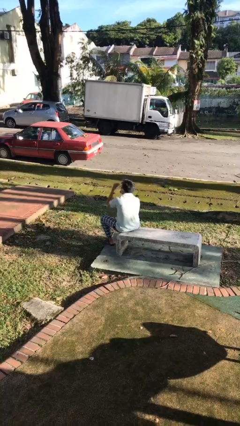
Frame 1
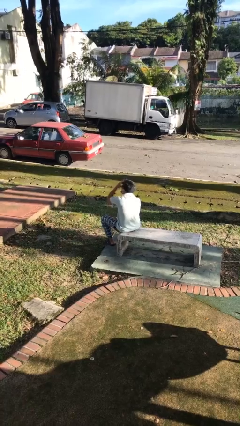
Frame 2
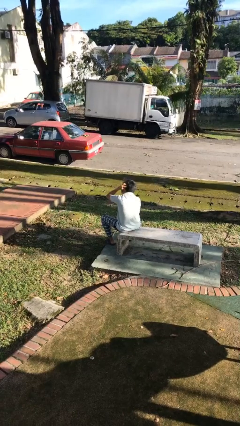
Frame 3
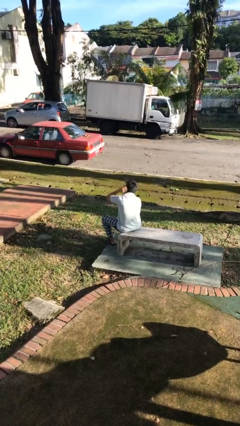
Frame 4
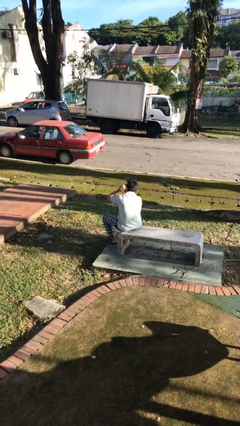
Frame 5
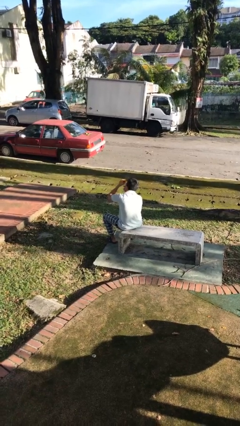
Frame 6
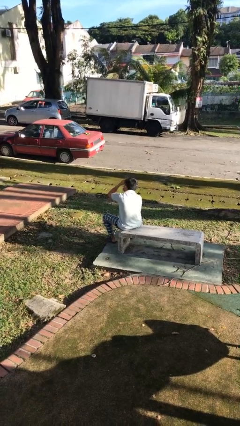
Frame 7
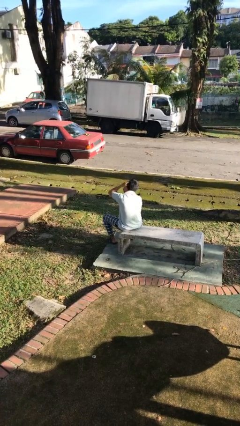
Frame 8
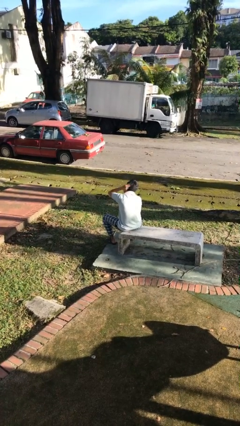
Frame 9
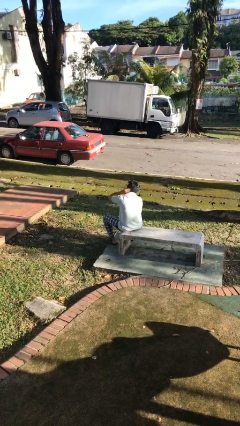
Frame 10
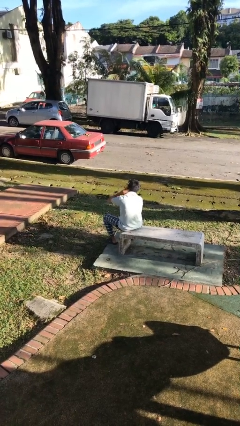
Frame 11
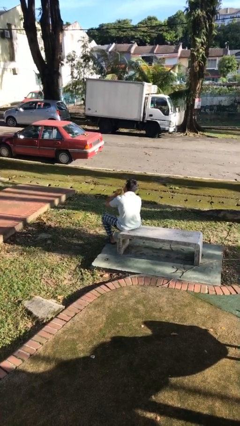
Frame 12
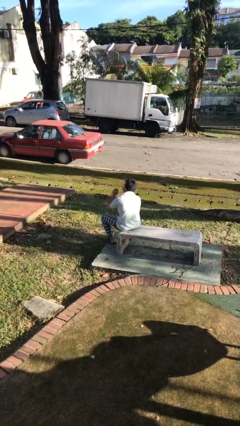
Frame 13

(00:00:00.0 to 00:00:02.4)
person strokes hair

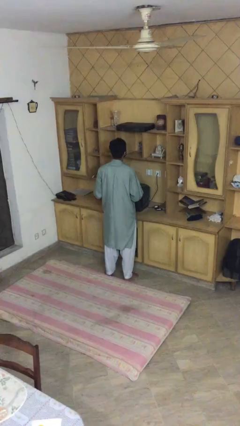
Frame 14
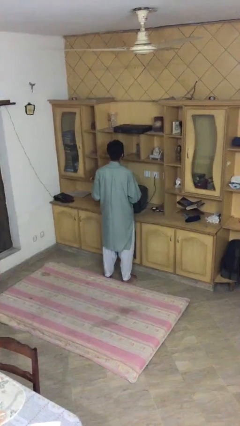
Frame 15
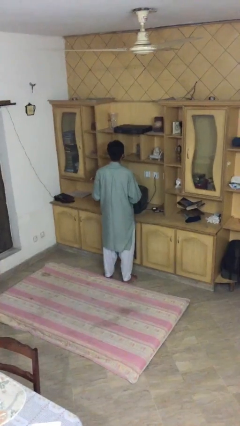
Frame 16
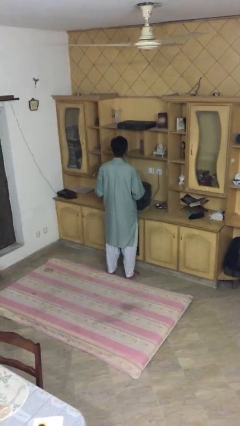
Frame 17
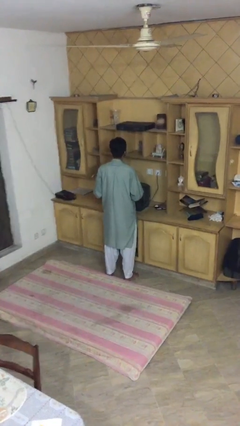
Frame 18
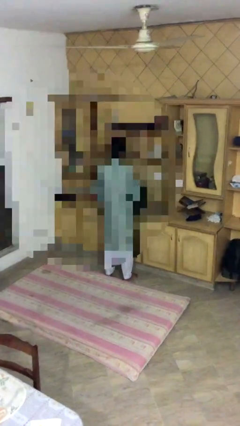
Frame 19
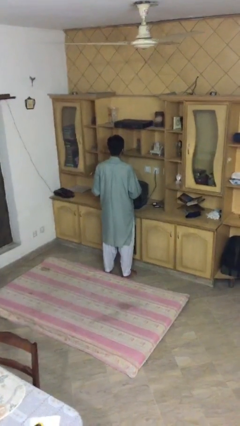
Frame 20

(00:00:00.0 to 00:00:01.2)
person picks up object from shelf

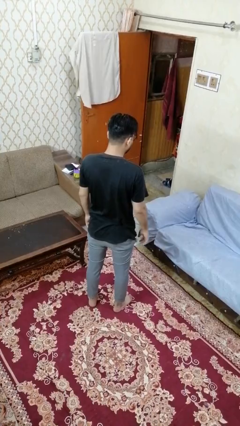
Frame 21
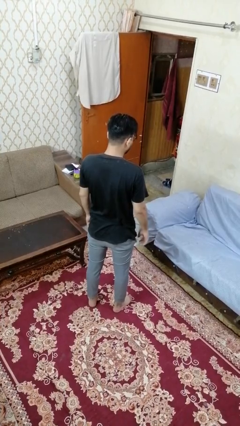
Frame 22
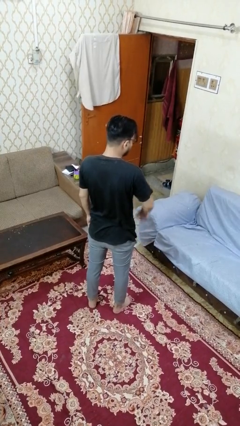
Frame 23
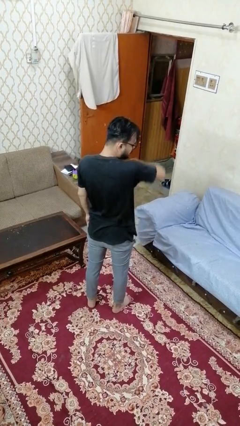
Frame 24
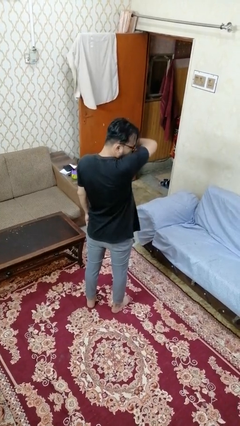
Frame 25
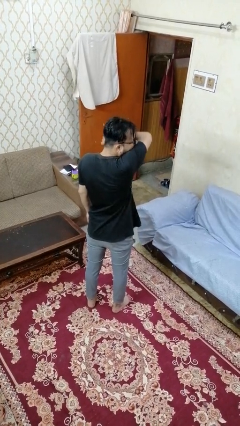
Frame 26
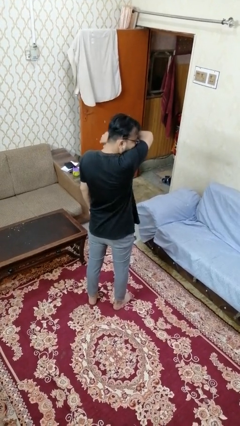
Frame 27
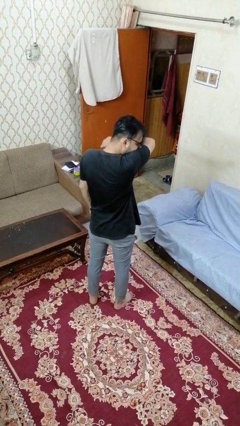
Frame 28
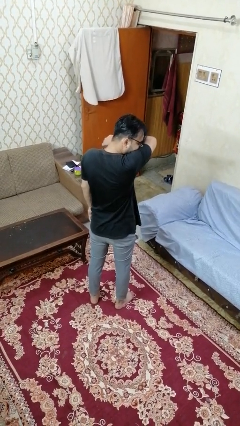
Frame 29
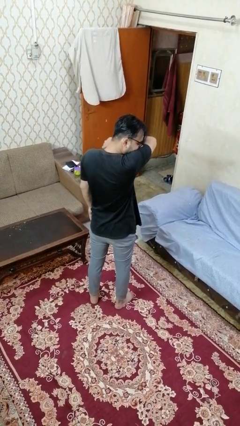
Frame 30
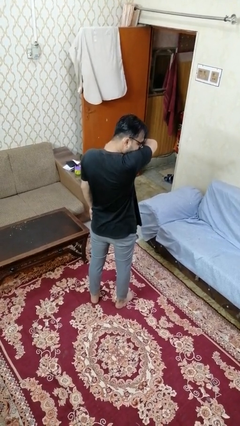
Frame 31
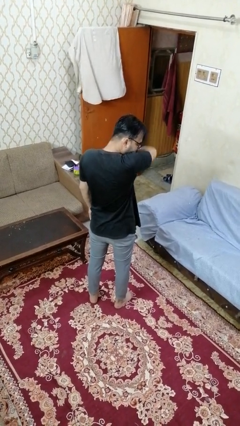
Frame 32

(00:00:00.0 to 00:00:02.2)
person sneezes into arm

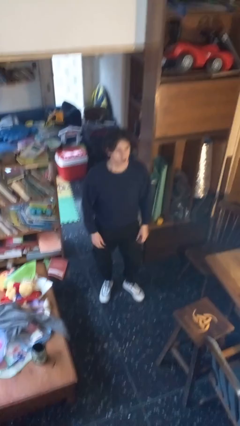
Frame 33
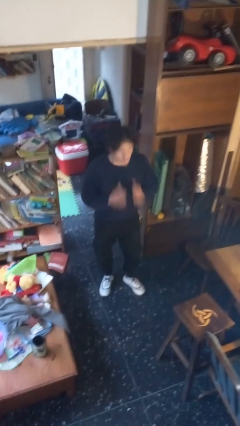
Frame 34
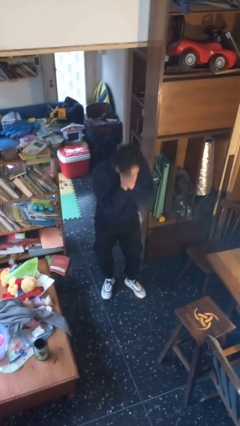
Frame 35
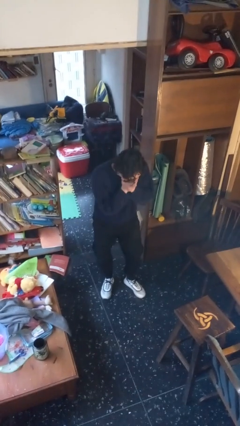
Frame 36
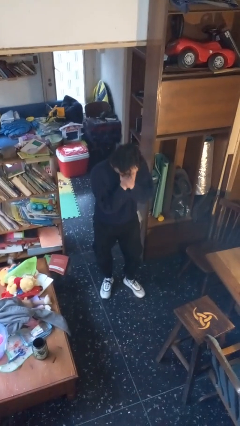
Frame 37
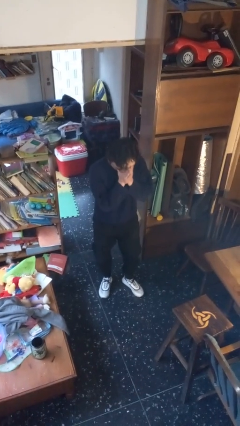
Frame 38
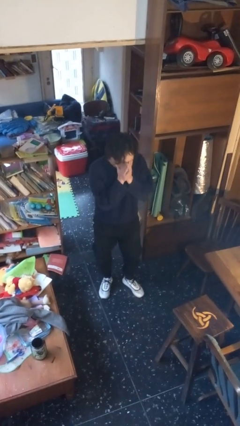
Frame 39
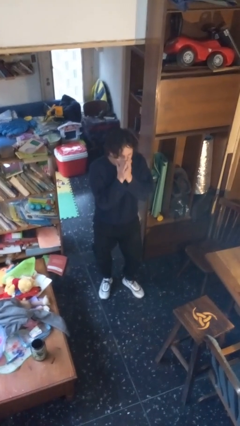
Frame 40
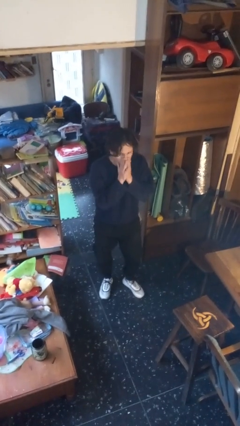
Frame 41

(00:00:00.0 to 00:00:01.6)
person sneezes into hand

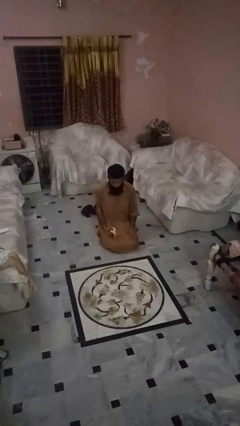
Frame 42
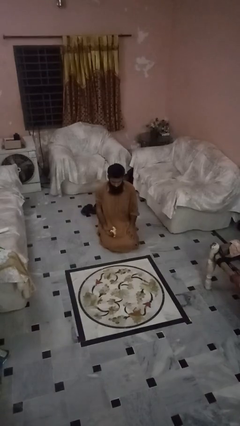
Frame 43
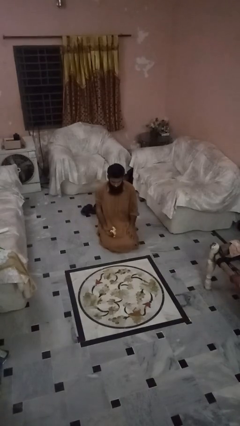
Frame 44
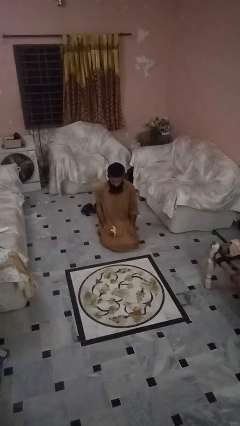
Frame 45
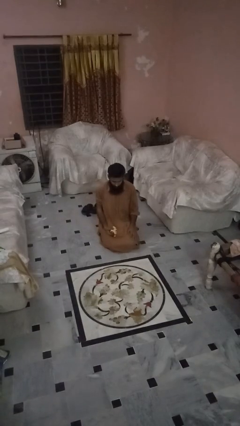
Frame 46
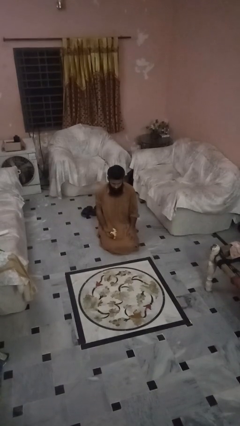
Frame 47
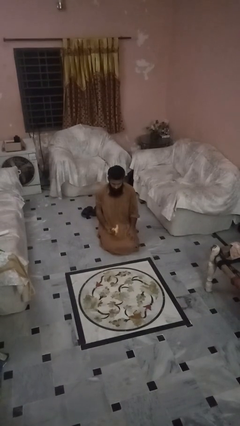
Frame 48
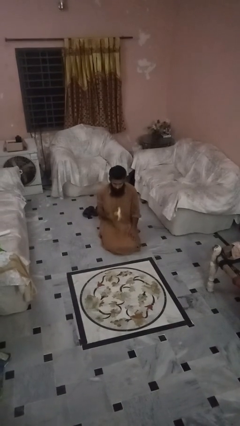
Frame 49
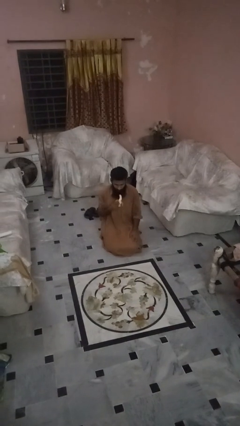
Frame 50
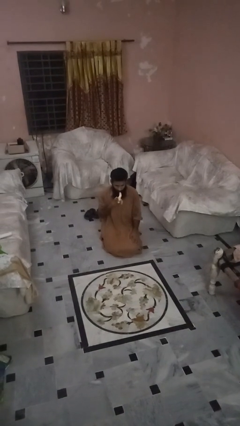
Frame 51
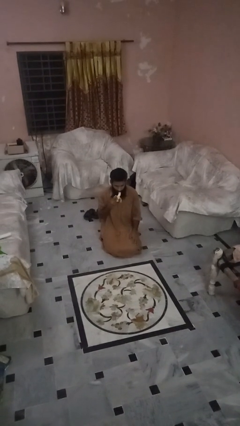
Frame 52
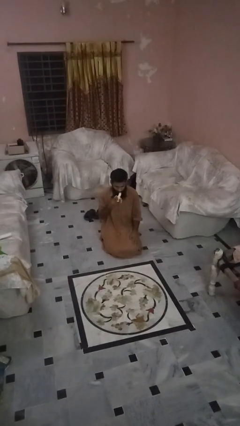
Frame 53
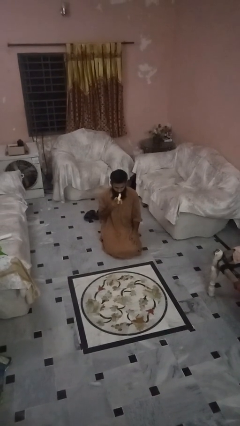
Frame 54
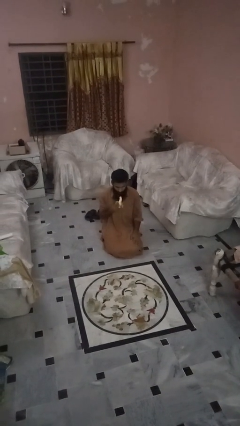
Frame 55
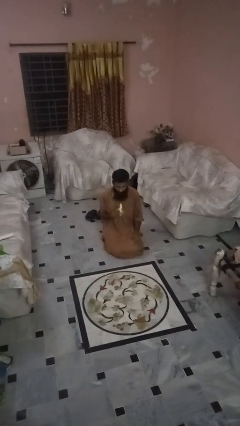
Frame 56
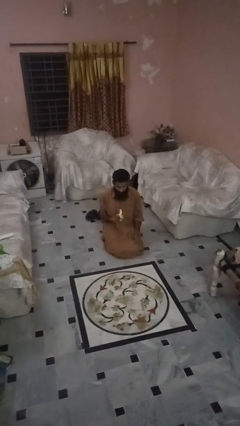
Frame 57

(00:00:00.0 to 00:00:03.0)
person eats banana

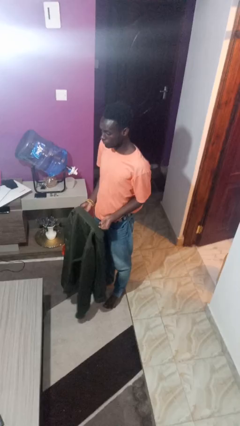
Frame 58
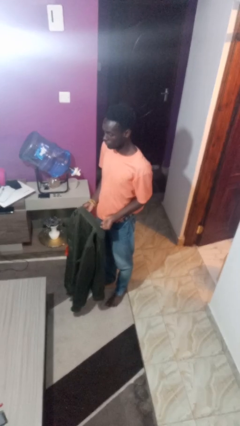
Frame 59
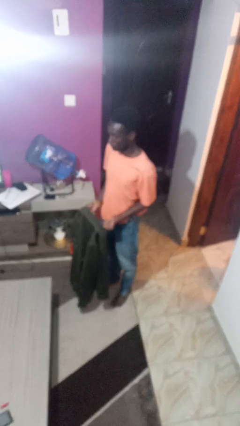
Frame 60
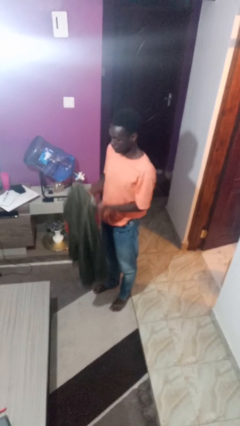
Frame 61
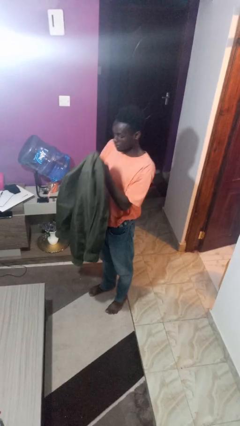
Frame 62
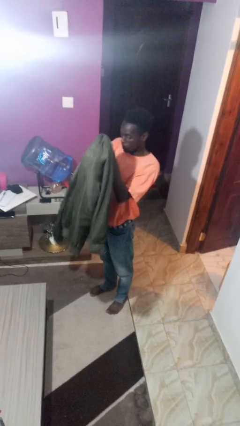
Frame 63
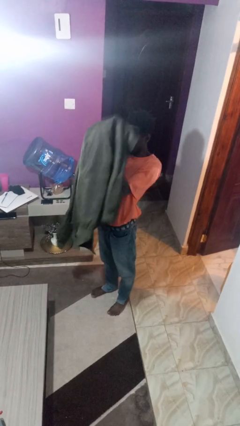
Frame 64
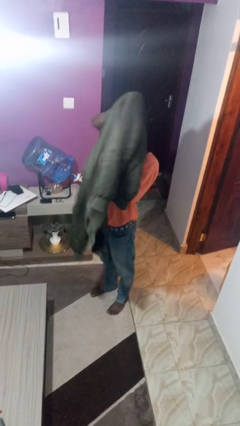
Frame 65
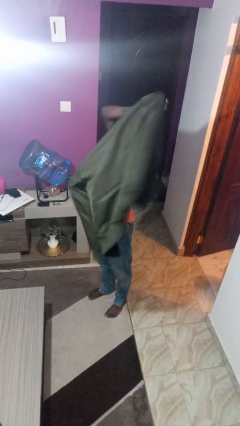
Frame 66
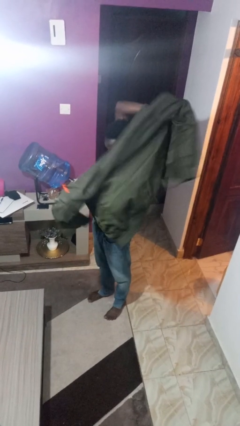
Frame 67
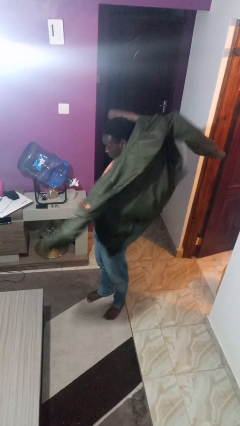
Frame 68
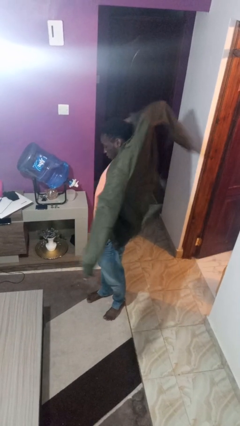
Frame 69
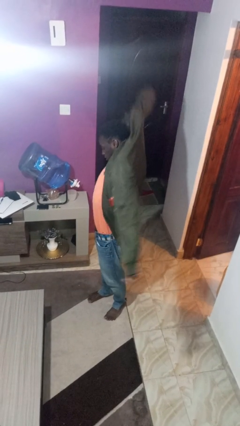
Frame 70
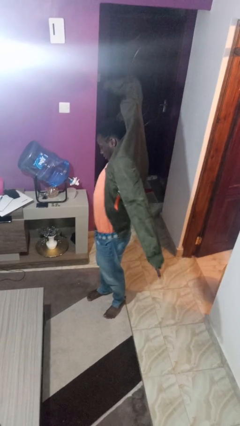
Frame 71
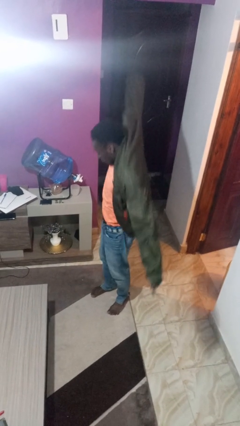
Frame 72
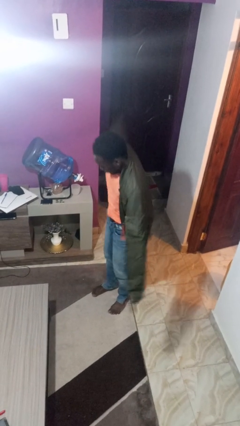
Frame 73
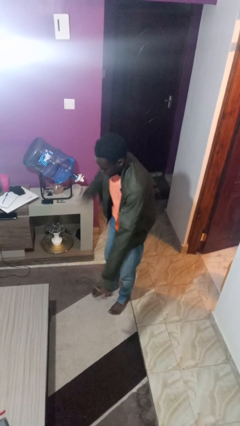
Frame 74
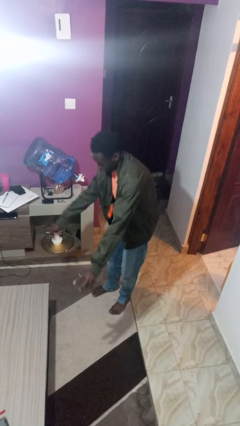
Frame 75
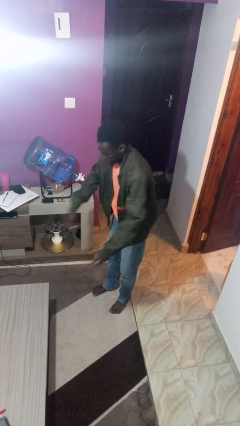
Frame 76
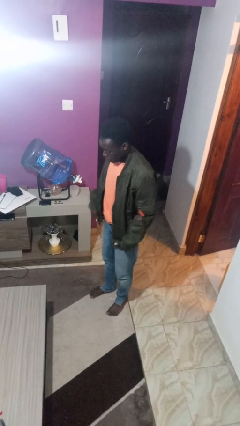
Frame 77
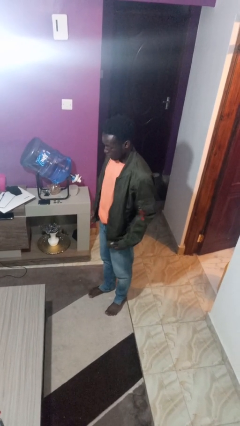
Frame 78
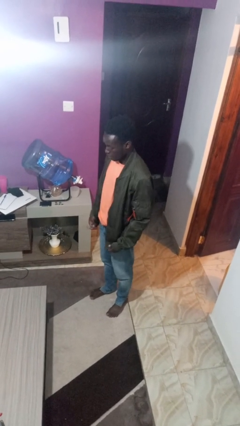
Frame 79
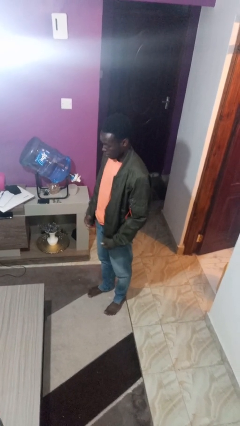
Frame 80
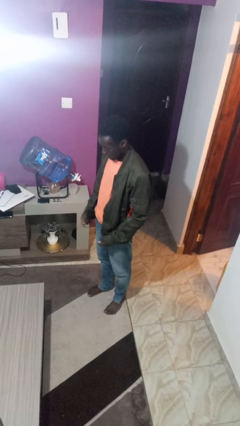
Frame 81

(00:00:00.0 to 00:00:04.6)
person puts on jacket

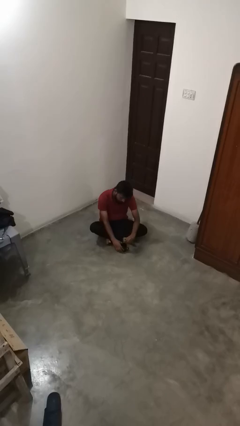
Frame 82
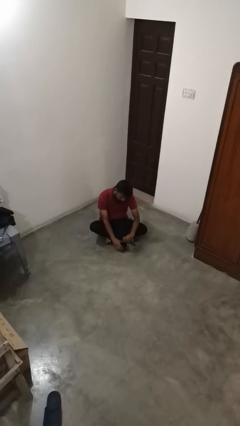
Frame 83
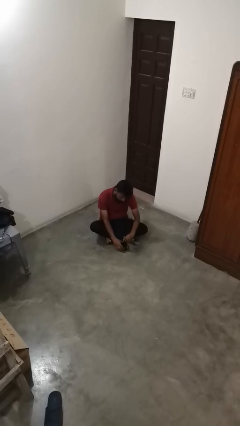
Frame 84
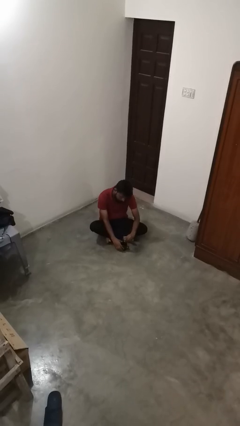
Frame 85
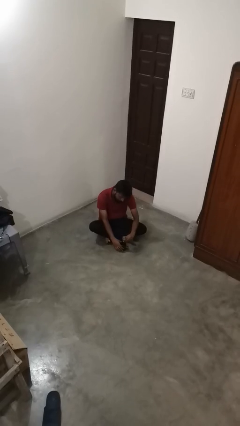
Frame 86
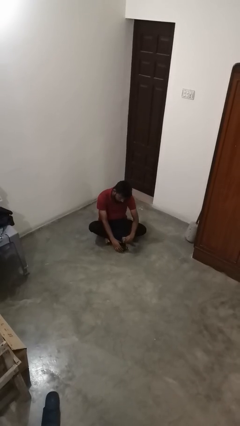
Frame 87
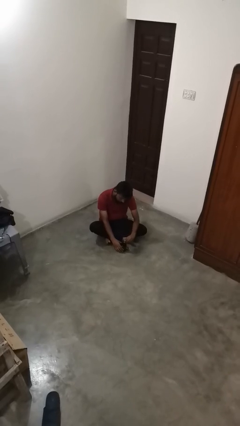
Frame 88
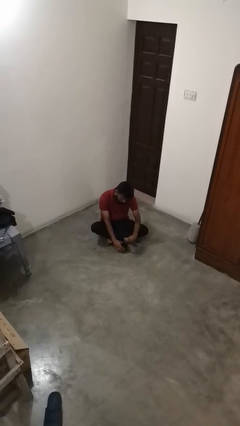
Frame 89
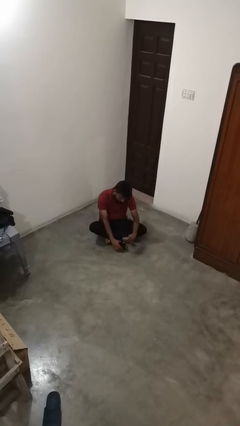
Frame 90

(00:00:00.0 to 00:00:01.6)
person stirs mug

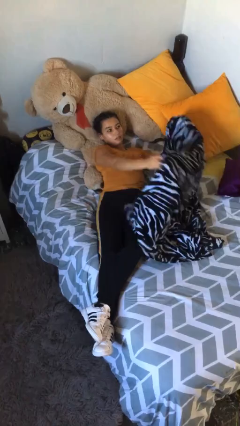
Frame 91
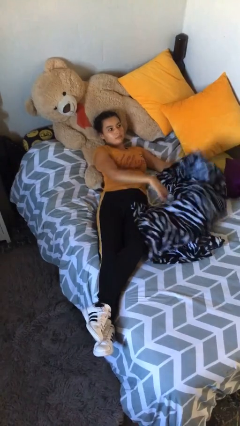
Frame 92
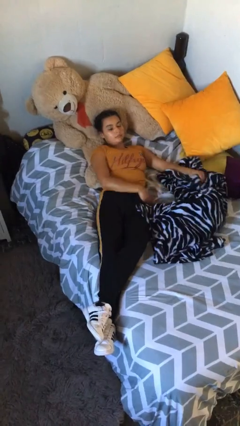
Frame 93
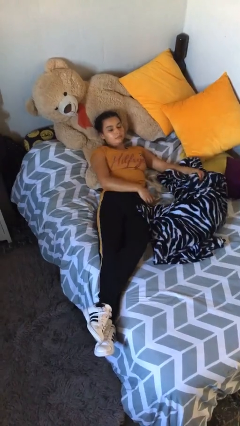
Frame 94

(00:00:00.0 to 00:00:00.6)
person uncovers with bedsheets
